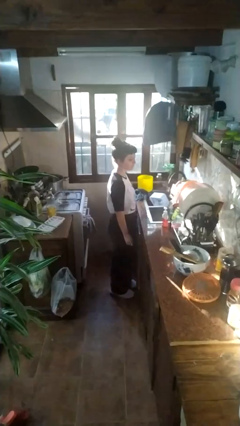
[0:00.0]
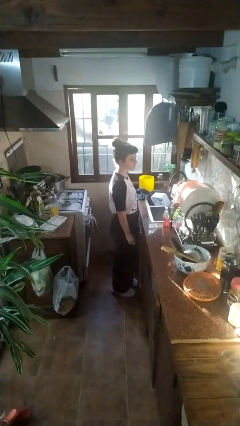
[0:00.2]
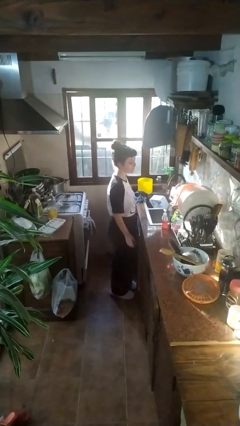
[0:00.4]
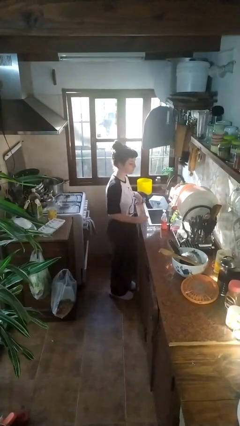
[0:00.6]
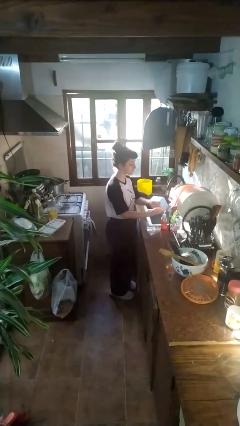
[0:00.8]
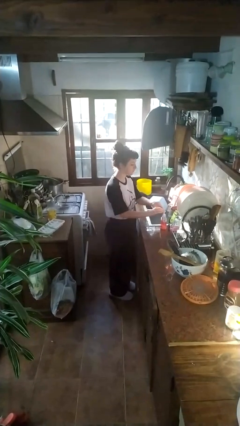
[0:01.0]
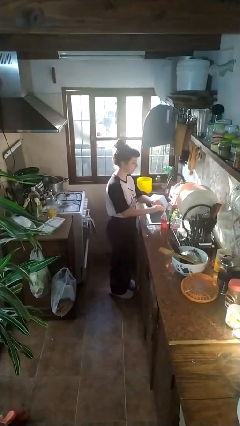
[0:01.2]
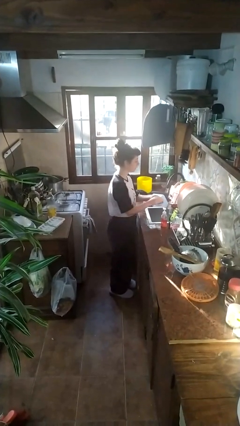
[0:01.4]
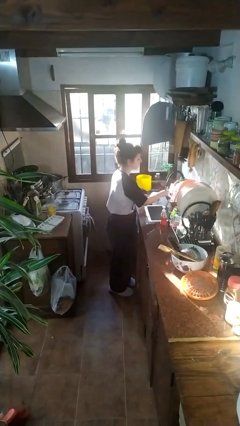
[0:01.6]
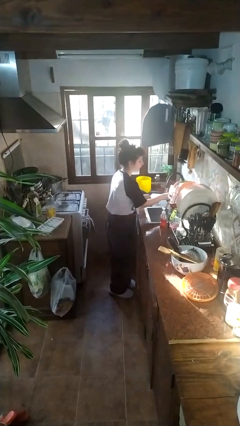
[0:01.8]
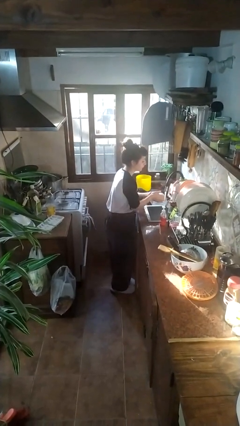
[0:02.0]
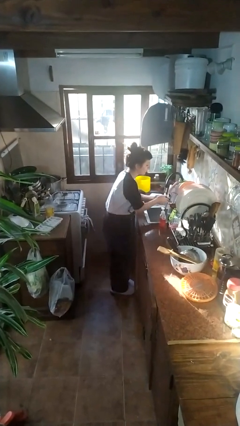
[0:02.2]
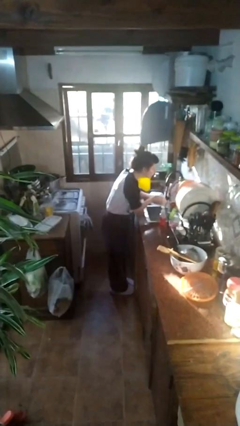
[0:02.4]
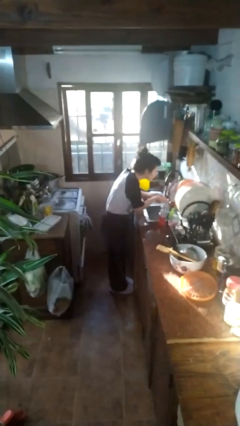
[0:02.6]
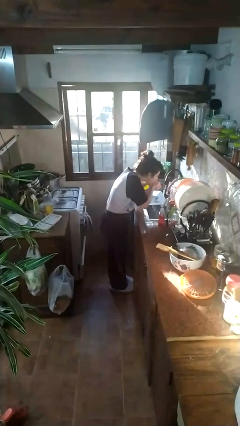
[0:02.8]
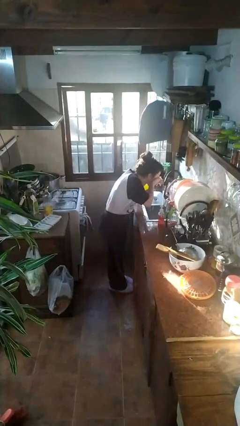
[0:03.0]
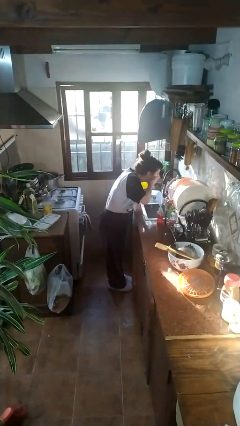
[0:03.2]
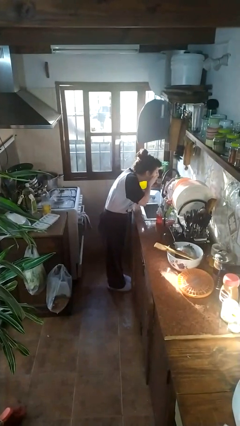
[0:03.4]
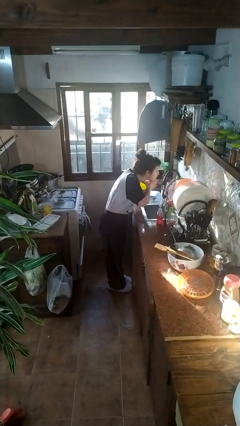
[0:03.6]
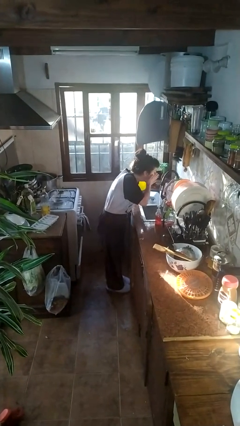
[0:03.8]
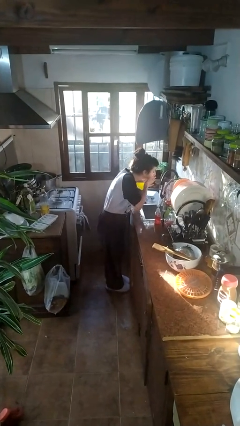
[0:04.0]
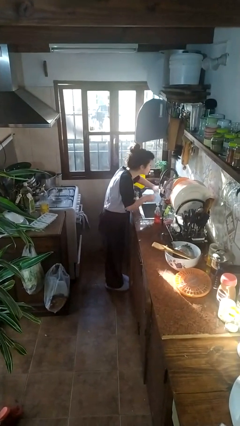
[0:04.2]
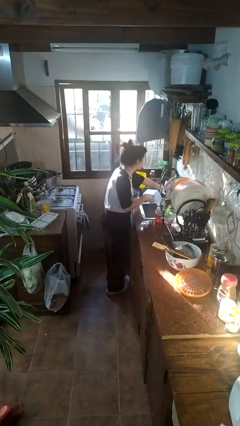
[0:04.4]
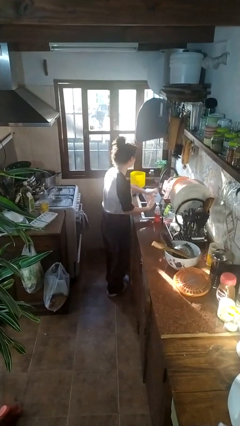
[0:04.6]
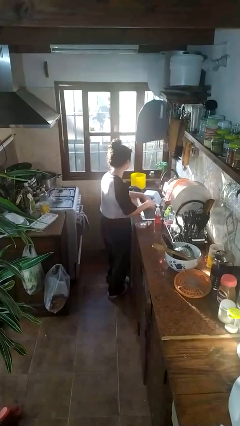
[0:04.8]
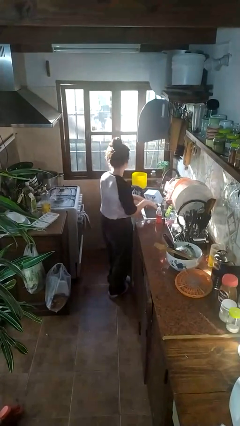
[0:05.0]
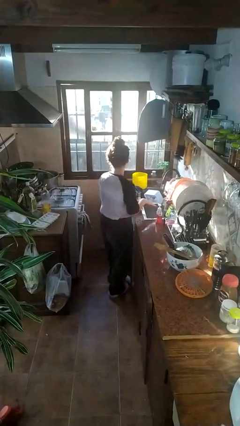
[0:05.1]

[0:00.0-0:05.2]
person washes face

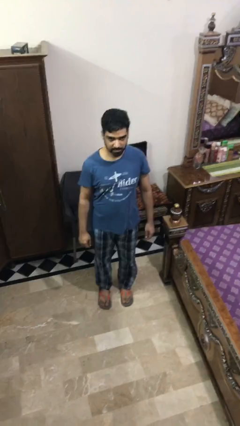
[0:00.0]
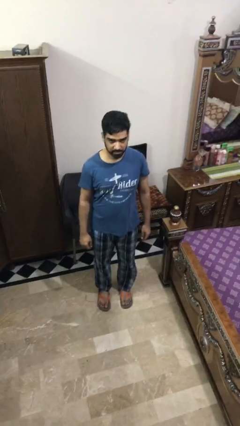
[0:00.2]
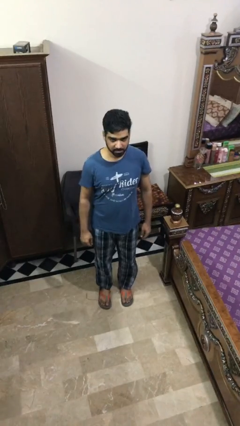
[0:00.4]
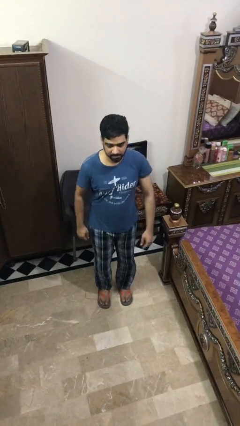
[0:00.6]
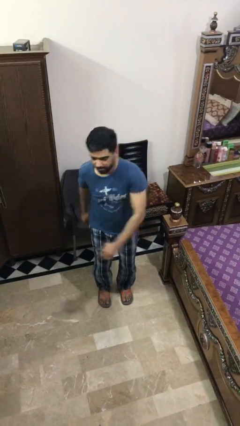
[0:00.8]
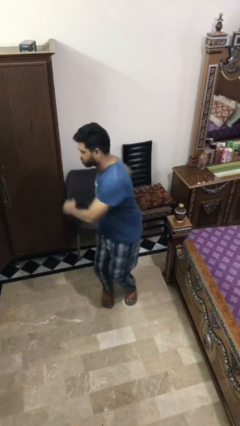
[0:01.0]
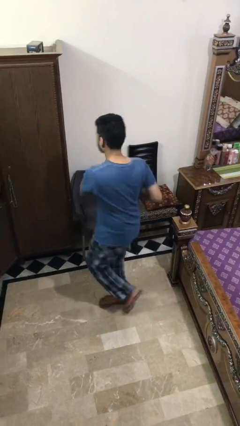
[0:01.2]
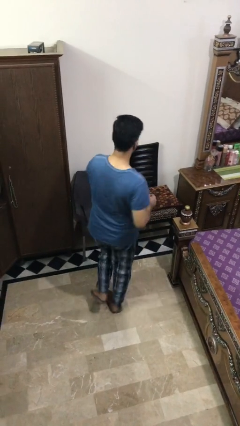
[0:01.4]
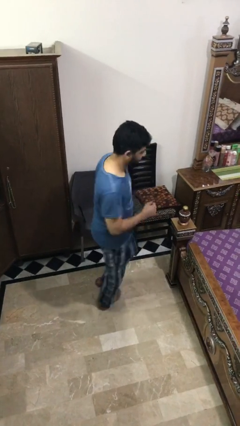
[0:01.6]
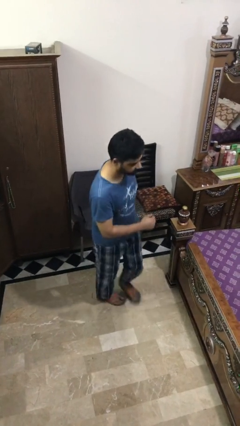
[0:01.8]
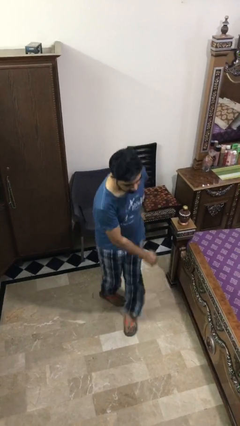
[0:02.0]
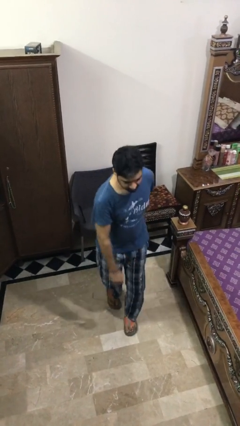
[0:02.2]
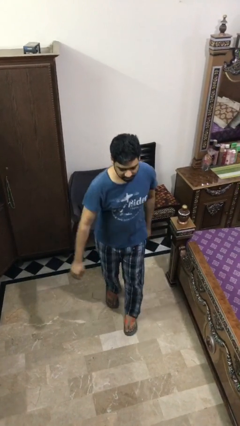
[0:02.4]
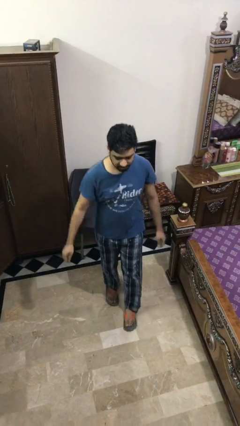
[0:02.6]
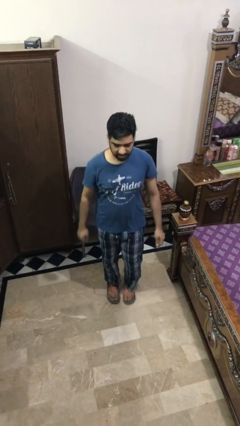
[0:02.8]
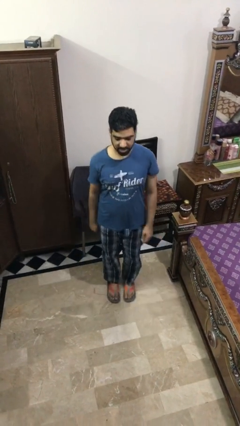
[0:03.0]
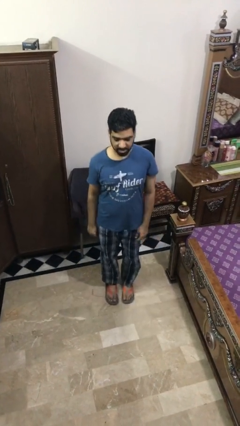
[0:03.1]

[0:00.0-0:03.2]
person twirls

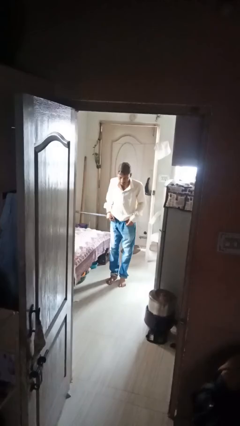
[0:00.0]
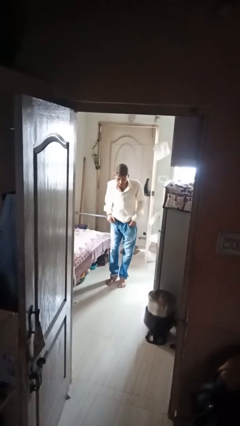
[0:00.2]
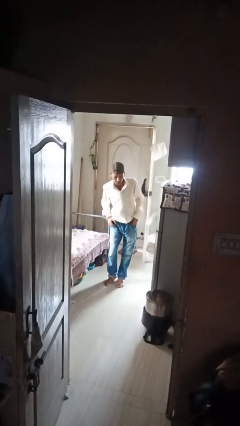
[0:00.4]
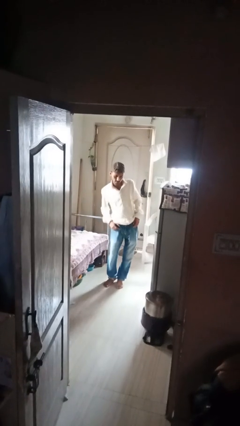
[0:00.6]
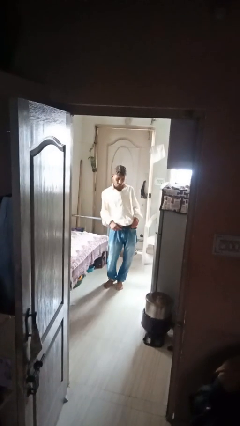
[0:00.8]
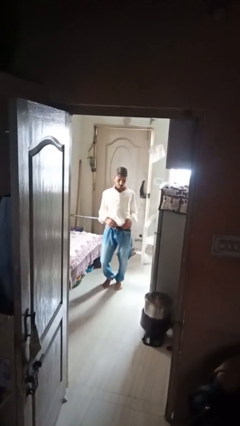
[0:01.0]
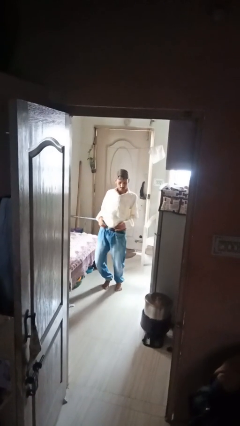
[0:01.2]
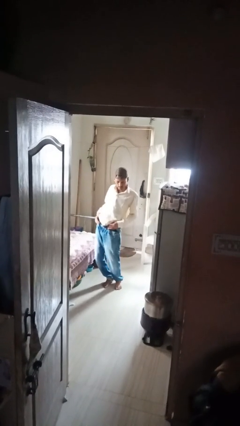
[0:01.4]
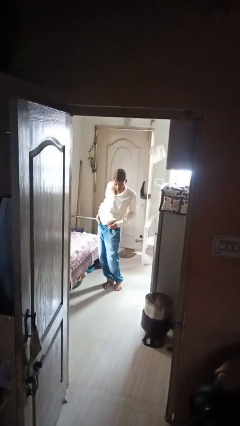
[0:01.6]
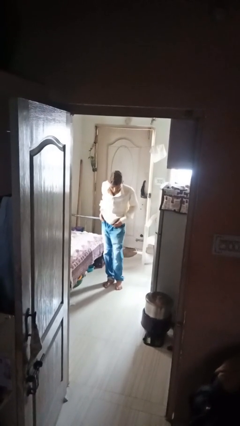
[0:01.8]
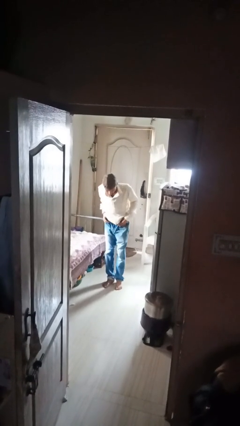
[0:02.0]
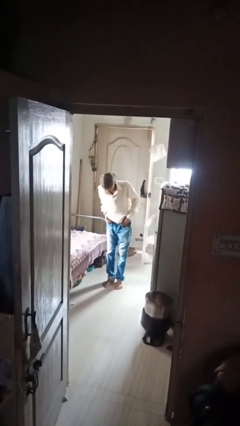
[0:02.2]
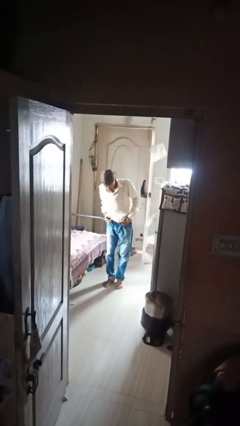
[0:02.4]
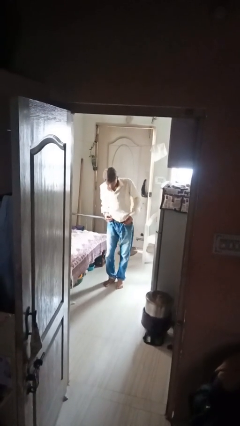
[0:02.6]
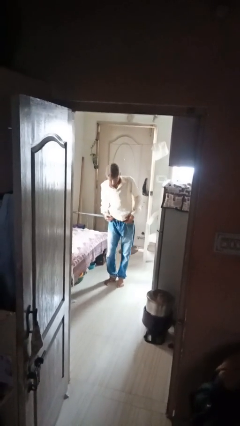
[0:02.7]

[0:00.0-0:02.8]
person wiggles hips

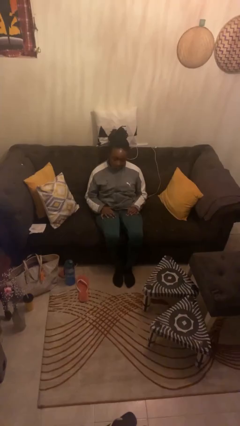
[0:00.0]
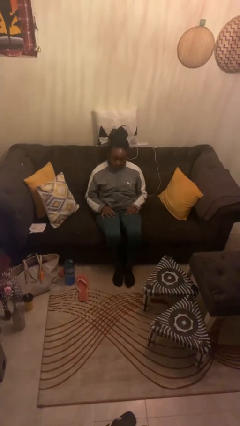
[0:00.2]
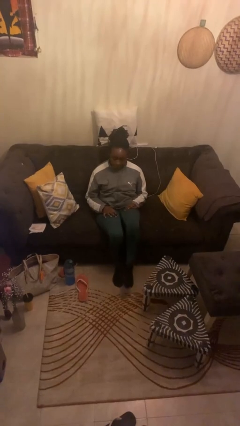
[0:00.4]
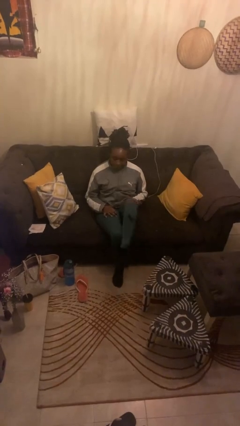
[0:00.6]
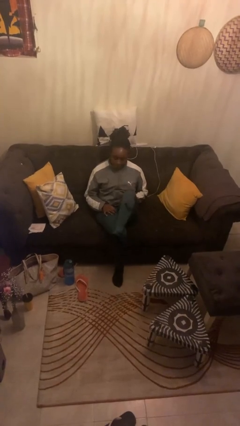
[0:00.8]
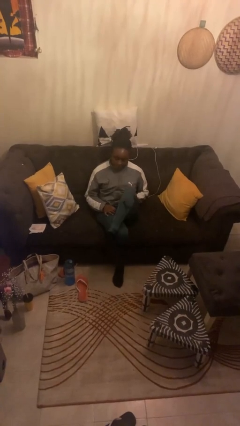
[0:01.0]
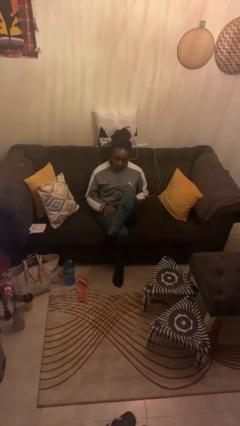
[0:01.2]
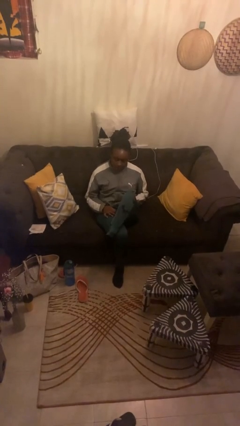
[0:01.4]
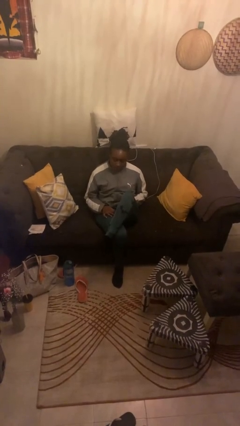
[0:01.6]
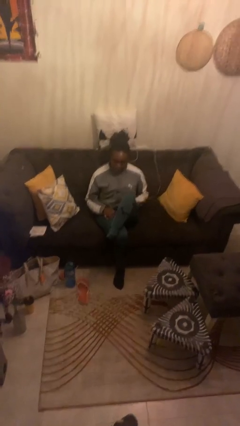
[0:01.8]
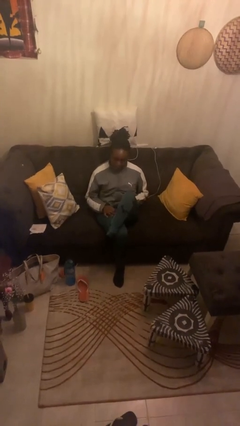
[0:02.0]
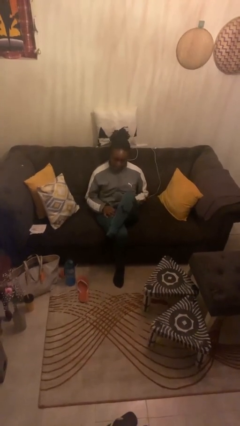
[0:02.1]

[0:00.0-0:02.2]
person crosses legs

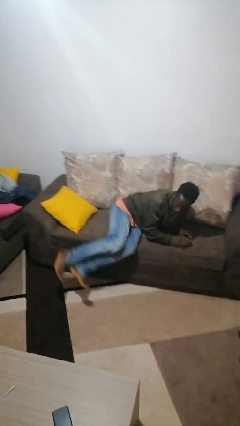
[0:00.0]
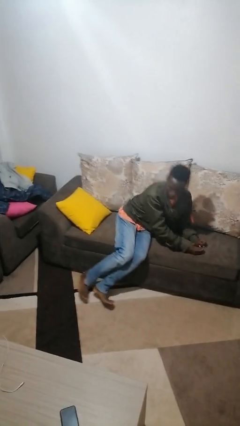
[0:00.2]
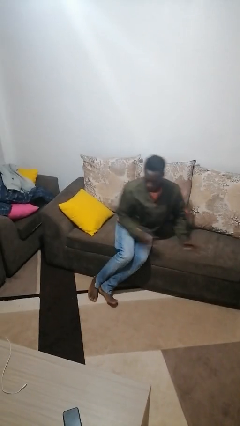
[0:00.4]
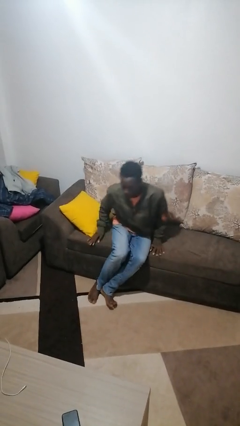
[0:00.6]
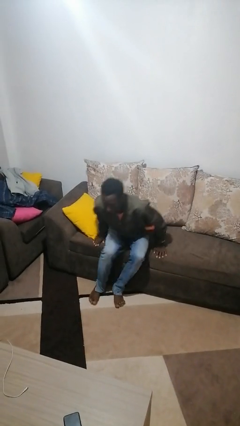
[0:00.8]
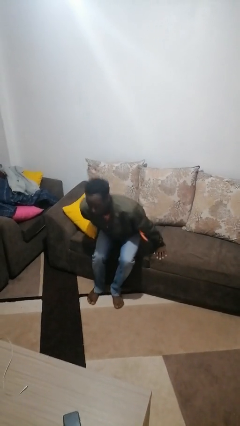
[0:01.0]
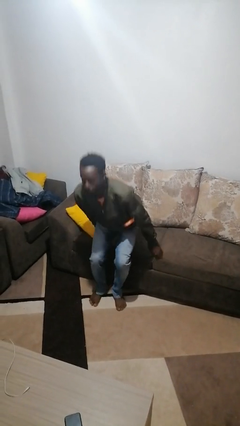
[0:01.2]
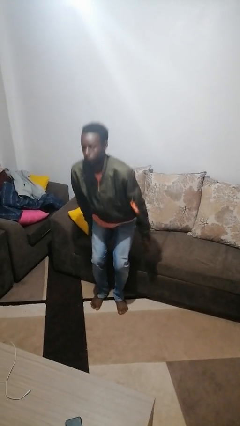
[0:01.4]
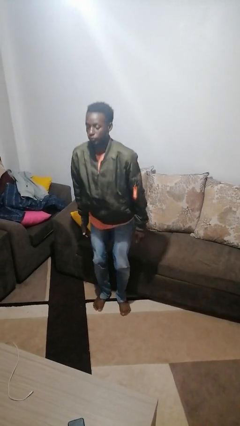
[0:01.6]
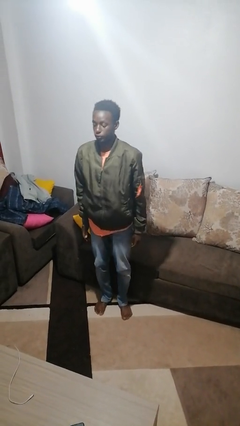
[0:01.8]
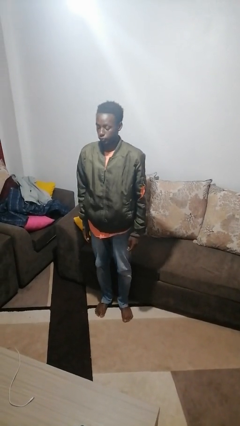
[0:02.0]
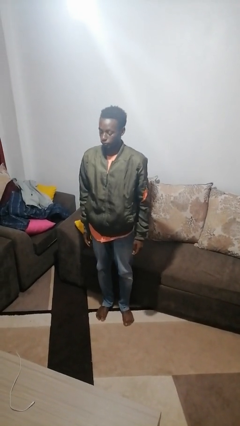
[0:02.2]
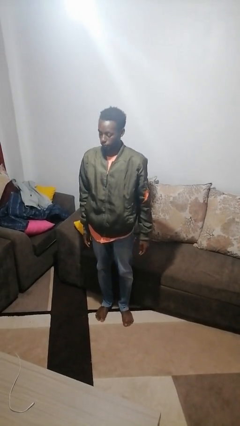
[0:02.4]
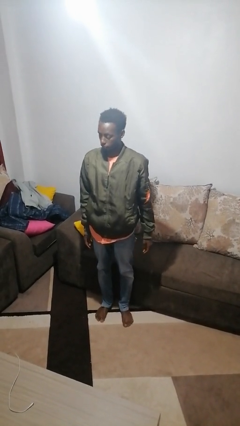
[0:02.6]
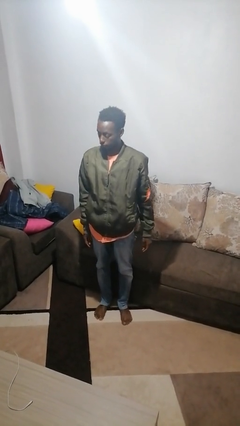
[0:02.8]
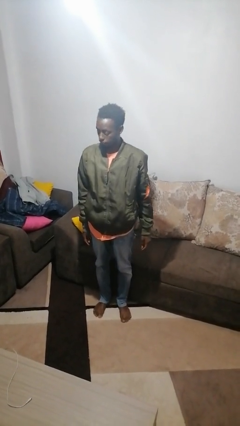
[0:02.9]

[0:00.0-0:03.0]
person stands up

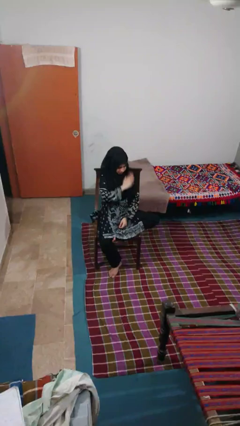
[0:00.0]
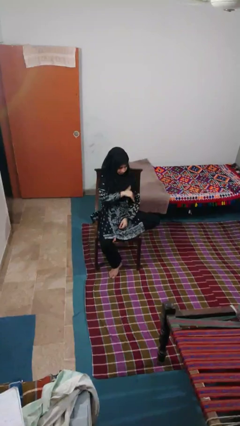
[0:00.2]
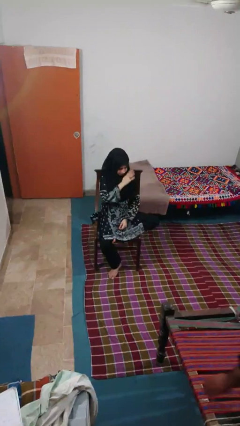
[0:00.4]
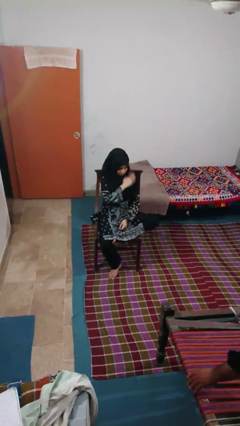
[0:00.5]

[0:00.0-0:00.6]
person swats bug
